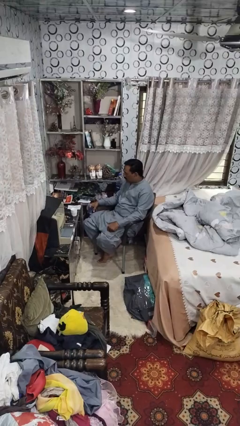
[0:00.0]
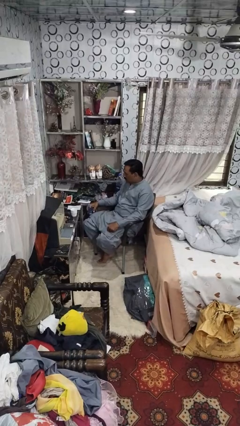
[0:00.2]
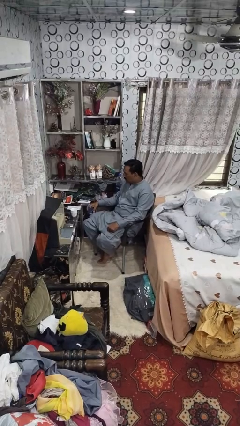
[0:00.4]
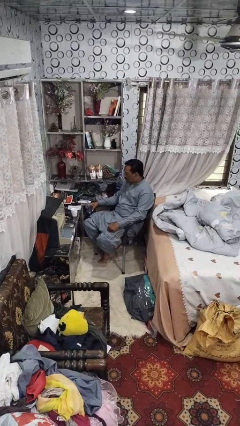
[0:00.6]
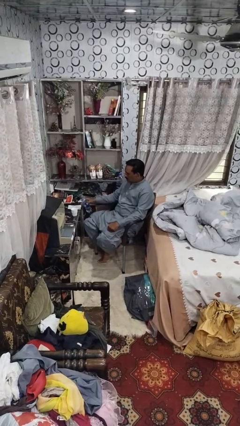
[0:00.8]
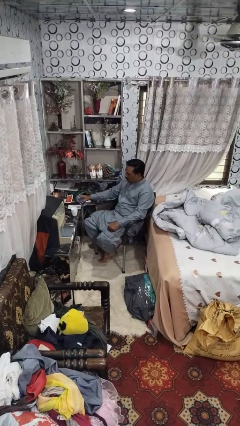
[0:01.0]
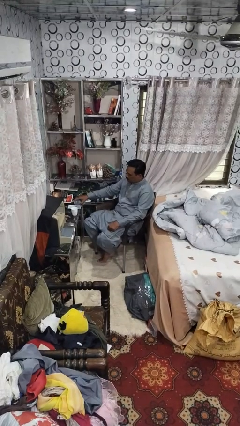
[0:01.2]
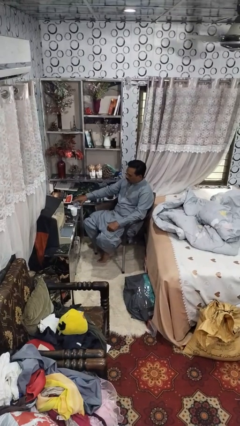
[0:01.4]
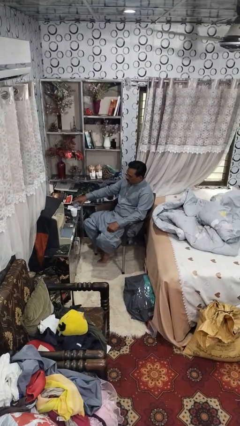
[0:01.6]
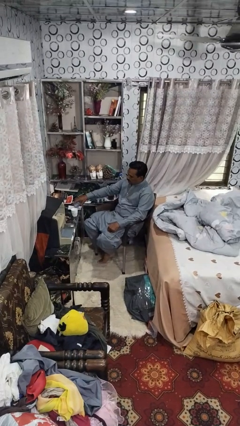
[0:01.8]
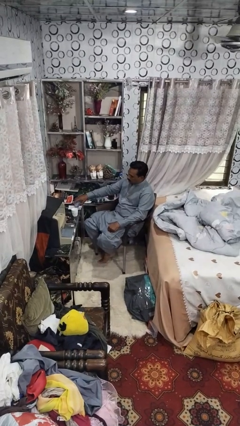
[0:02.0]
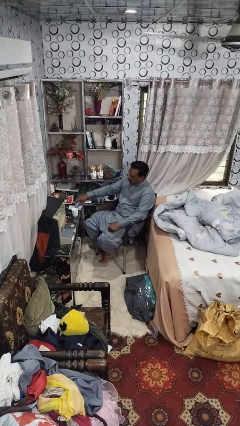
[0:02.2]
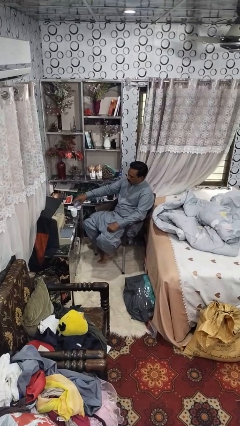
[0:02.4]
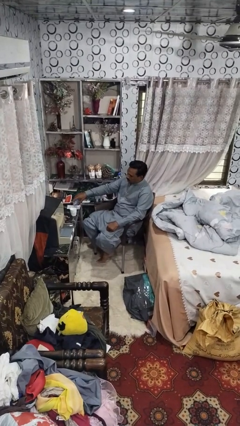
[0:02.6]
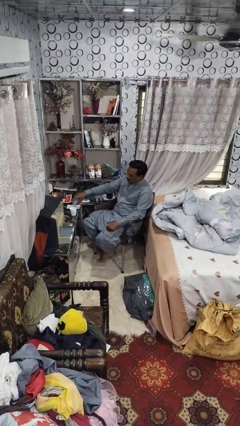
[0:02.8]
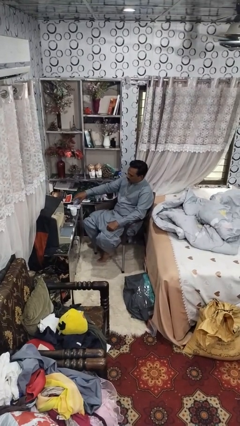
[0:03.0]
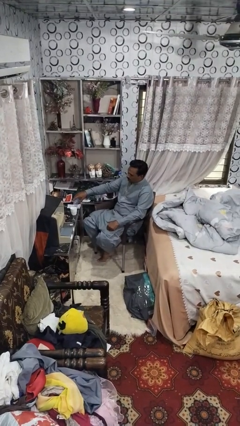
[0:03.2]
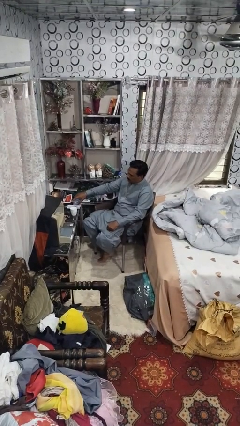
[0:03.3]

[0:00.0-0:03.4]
person pours liquid into cup

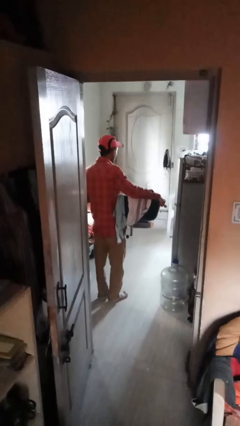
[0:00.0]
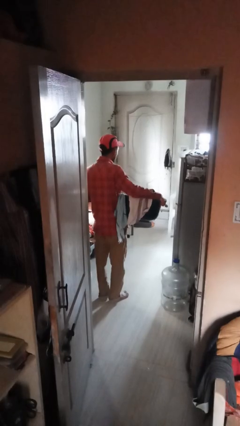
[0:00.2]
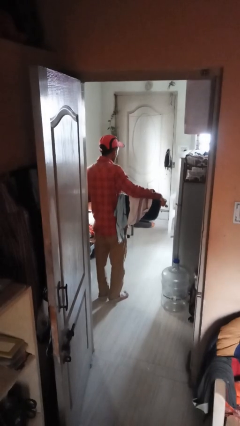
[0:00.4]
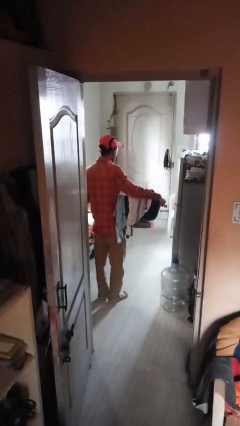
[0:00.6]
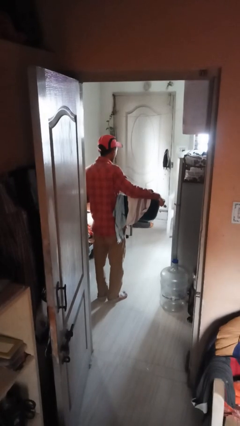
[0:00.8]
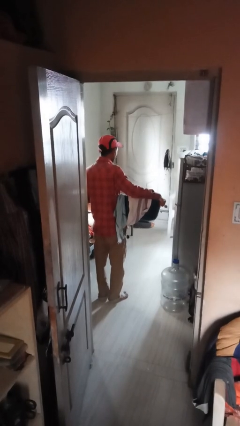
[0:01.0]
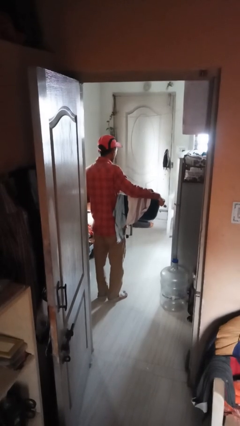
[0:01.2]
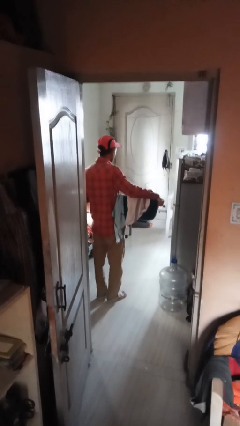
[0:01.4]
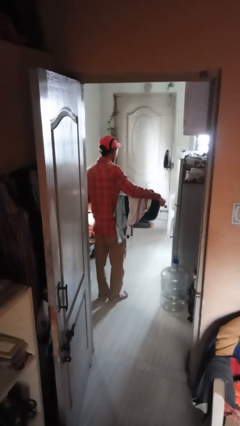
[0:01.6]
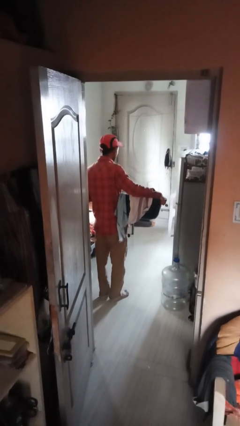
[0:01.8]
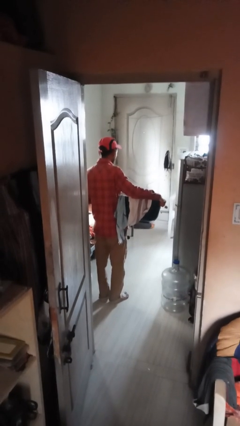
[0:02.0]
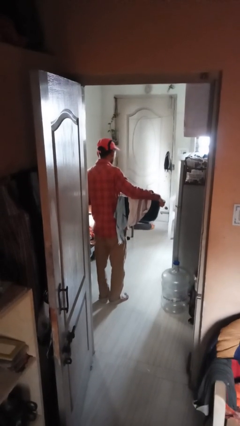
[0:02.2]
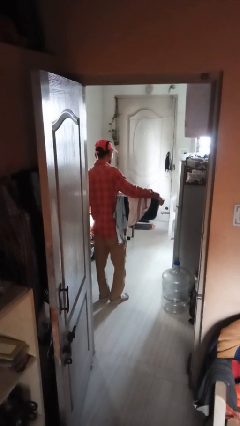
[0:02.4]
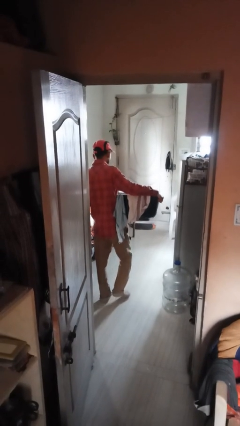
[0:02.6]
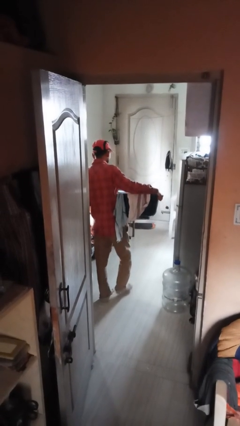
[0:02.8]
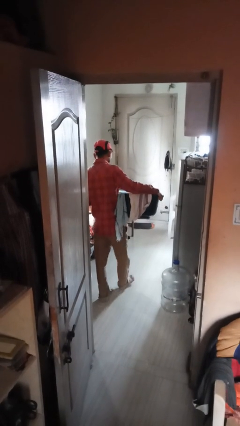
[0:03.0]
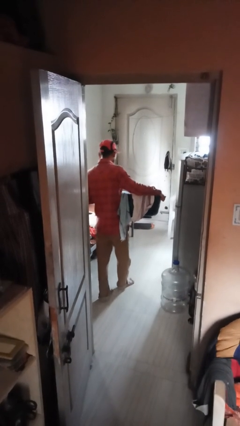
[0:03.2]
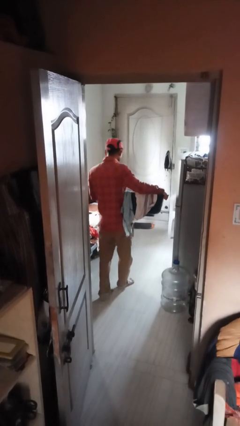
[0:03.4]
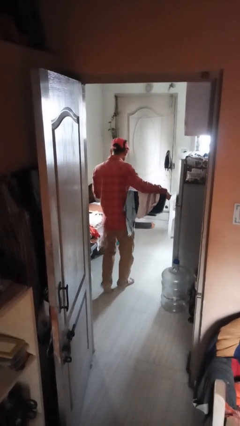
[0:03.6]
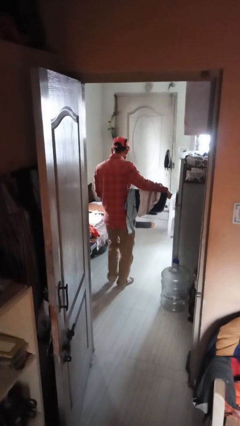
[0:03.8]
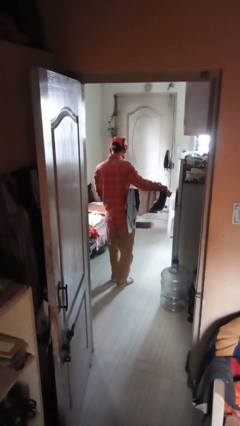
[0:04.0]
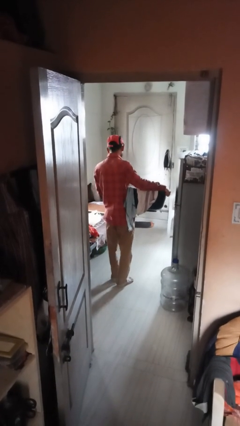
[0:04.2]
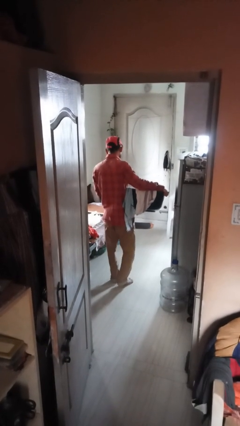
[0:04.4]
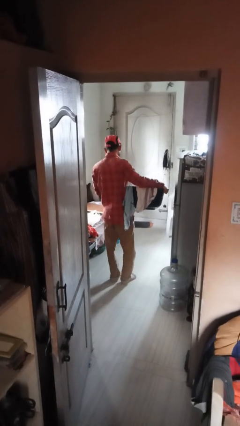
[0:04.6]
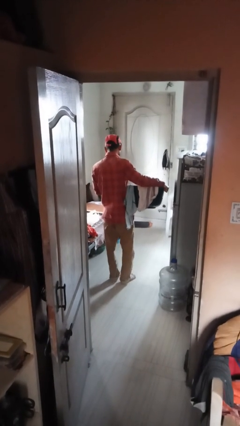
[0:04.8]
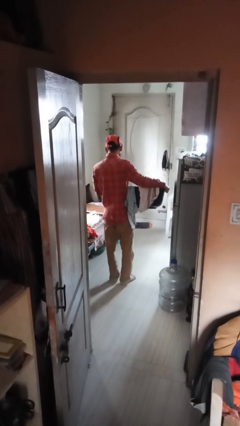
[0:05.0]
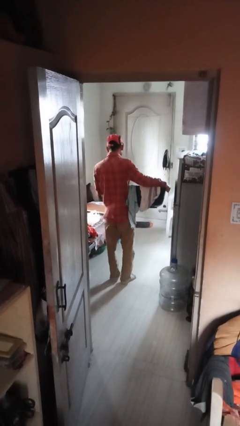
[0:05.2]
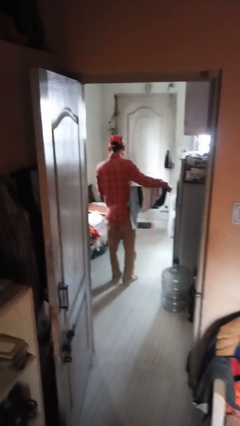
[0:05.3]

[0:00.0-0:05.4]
person carries laundry basket

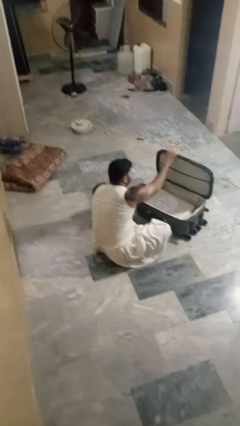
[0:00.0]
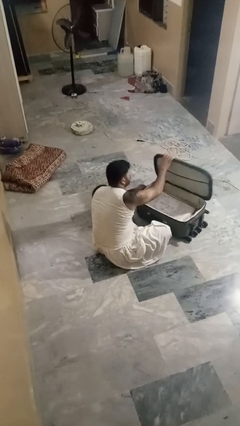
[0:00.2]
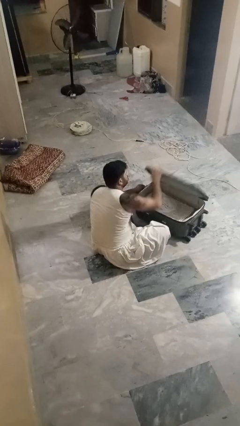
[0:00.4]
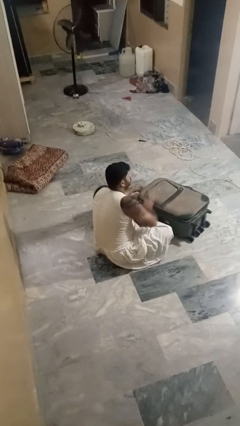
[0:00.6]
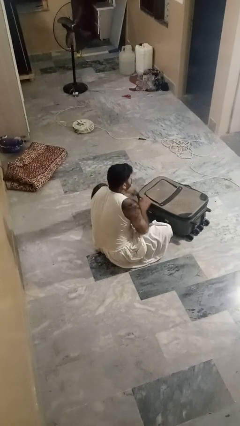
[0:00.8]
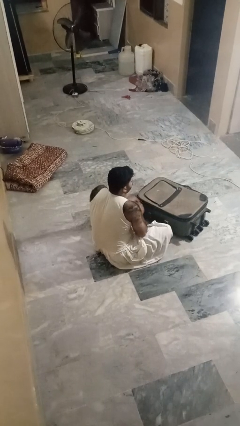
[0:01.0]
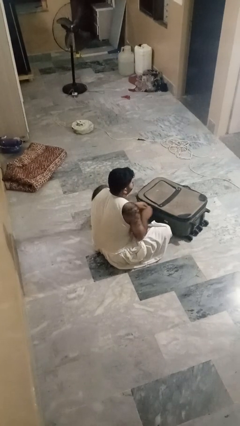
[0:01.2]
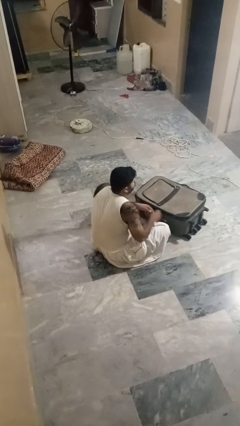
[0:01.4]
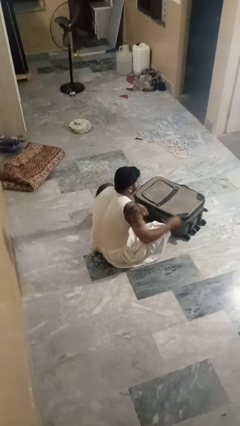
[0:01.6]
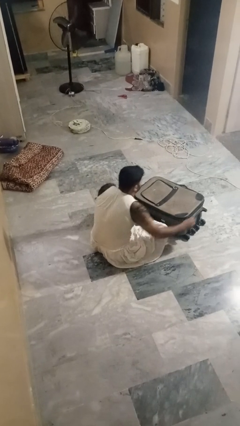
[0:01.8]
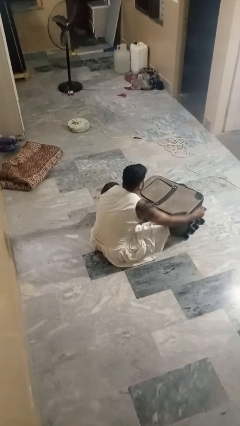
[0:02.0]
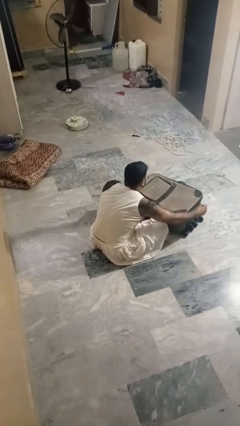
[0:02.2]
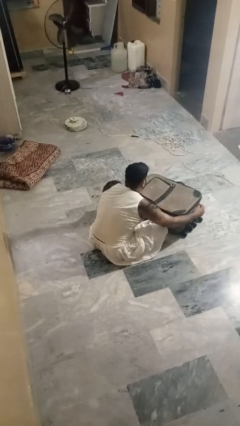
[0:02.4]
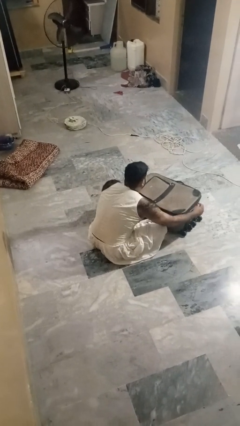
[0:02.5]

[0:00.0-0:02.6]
person closes suitcase

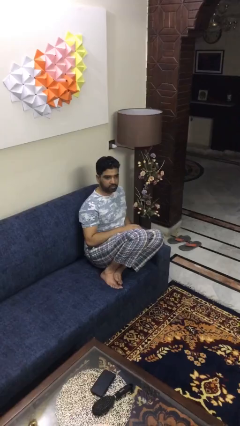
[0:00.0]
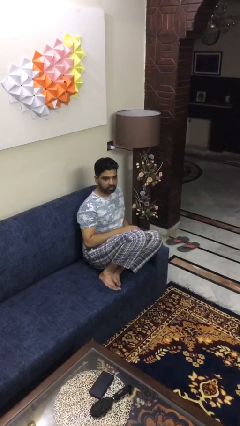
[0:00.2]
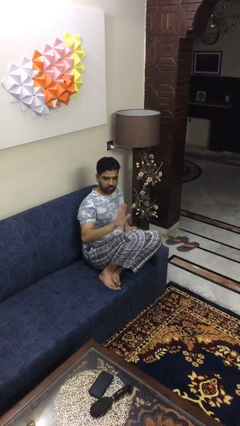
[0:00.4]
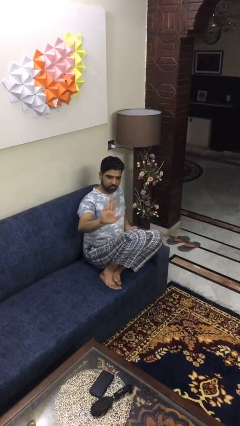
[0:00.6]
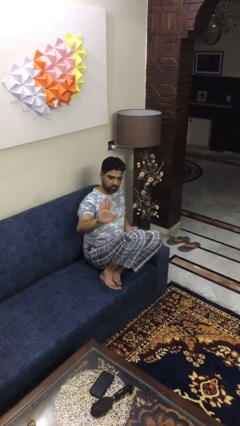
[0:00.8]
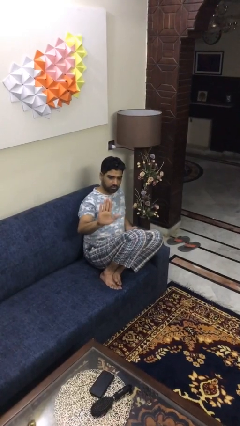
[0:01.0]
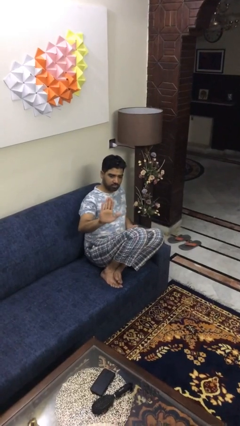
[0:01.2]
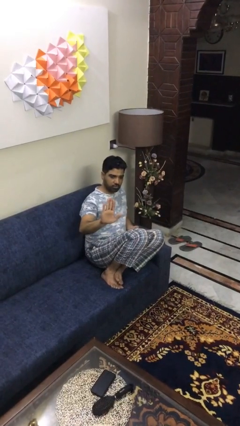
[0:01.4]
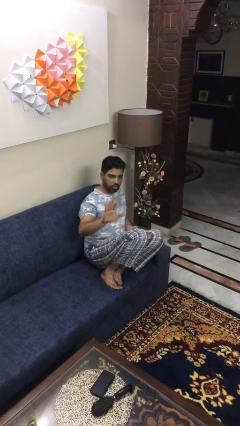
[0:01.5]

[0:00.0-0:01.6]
person gestures stop

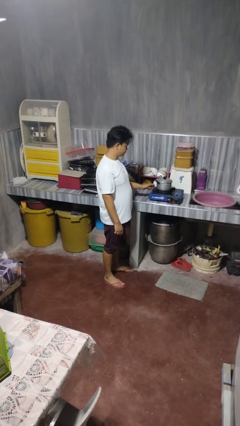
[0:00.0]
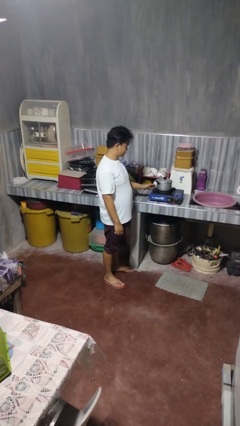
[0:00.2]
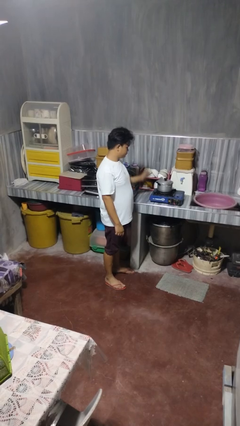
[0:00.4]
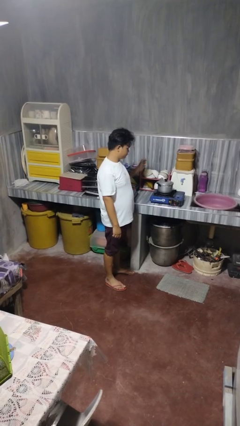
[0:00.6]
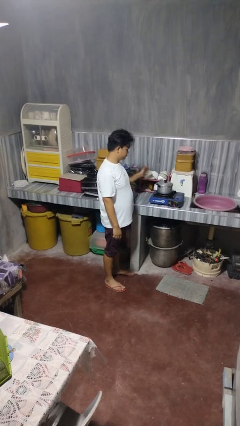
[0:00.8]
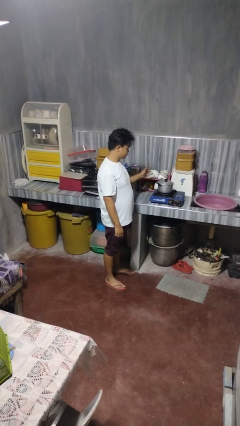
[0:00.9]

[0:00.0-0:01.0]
person burns hand

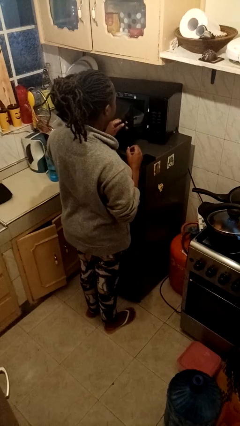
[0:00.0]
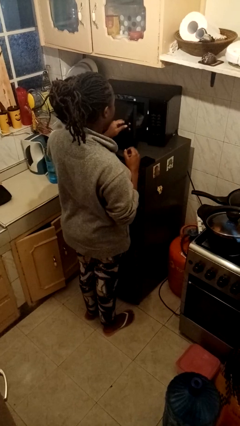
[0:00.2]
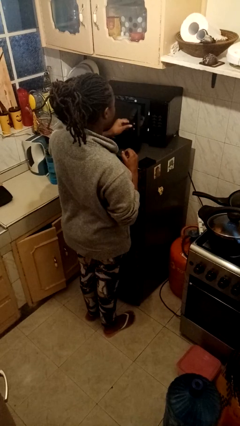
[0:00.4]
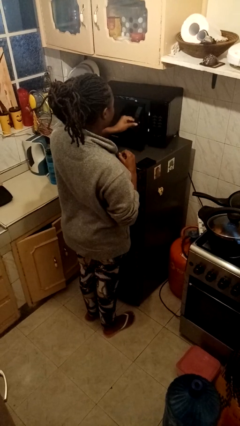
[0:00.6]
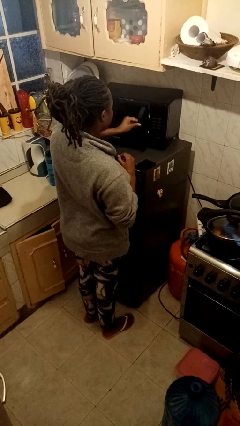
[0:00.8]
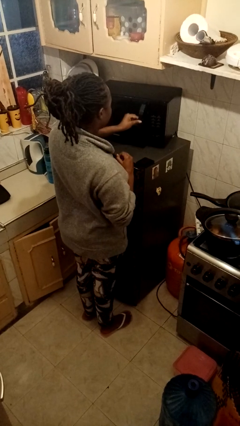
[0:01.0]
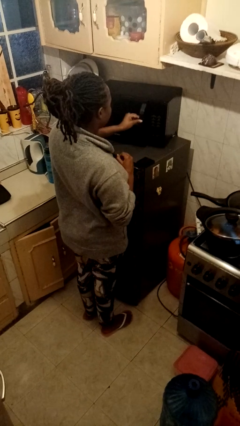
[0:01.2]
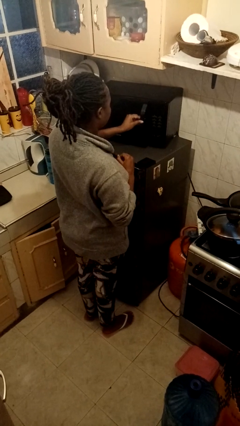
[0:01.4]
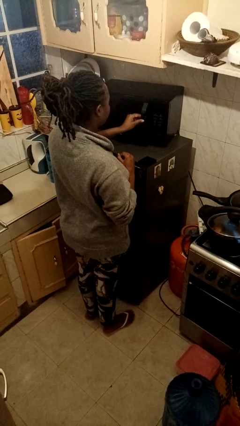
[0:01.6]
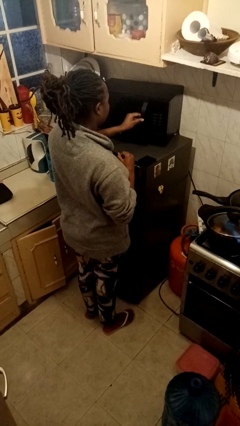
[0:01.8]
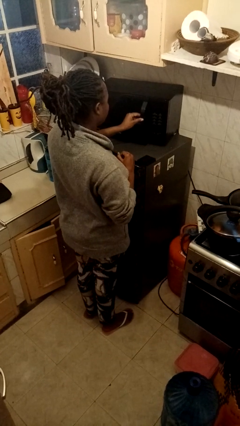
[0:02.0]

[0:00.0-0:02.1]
person closes microwave

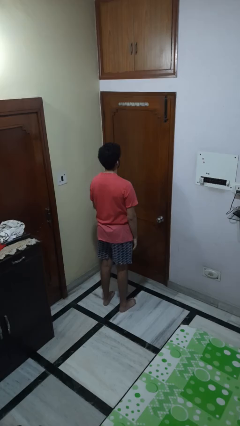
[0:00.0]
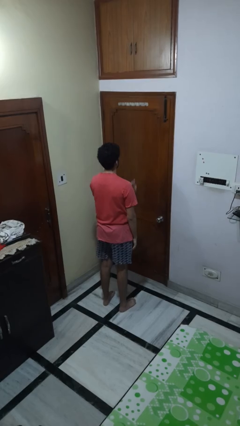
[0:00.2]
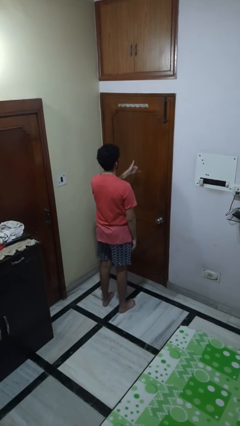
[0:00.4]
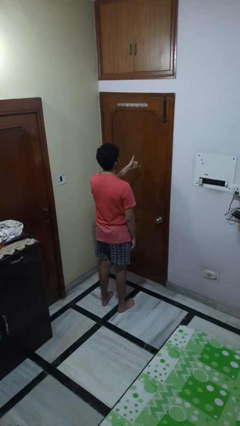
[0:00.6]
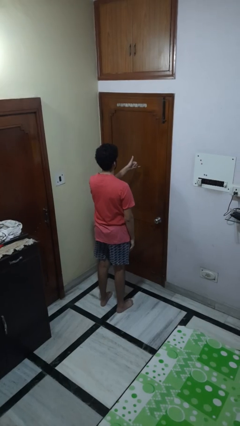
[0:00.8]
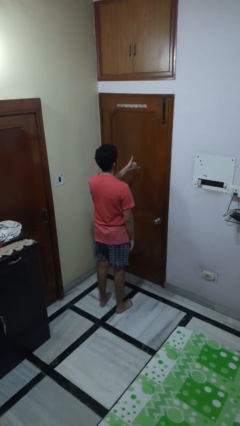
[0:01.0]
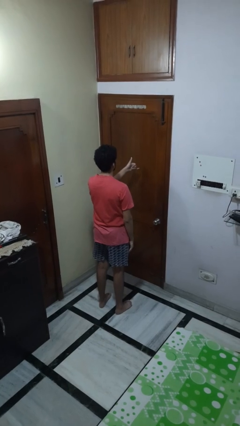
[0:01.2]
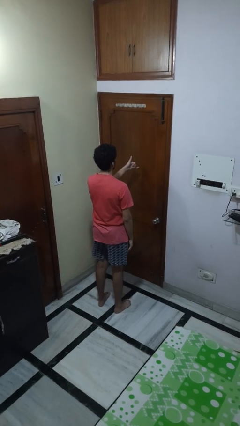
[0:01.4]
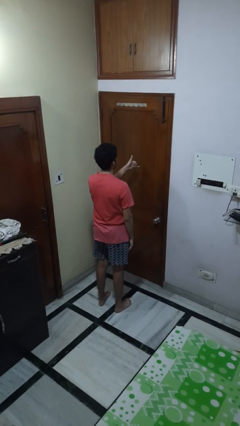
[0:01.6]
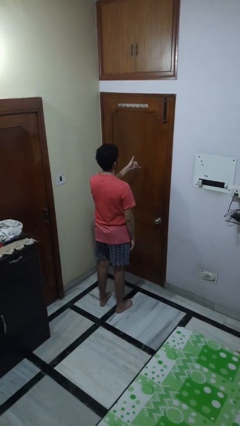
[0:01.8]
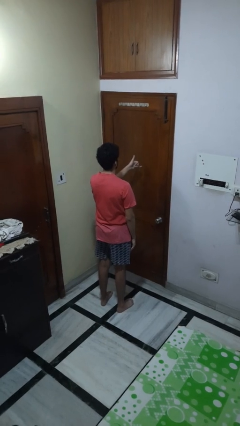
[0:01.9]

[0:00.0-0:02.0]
person gestures hang loose
